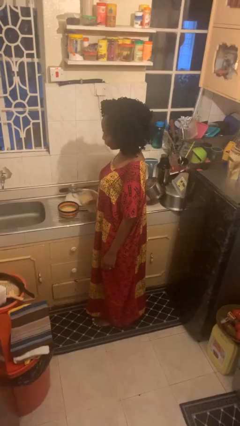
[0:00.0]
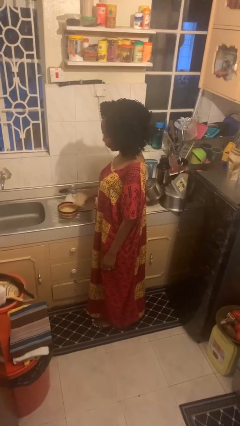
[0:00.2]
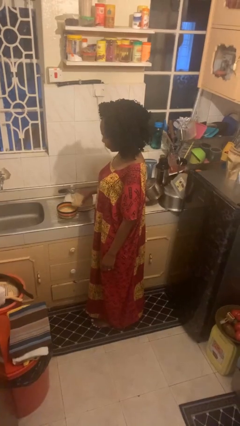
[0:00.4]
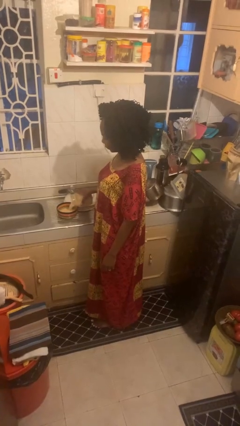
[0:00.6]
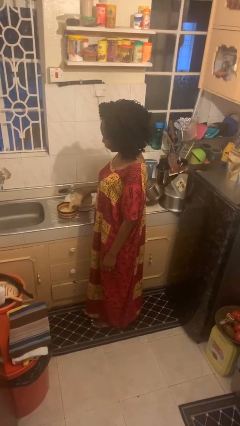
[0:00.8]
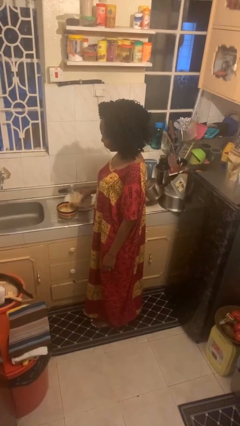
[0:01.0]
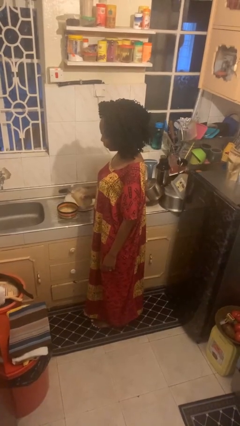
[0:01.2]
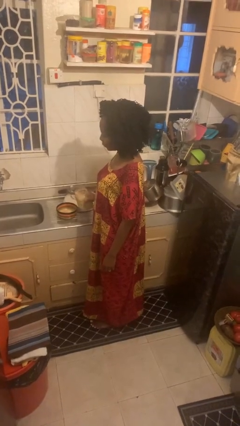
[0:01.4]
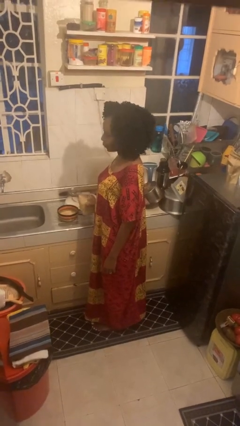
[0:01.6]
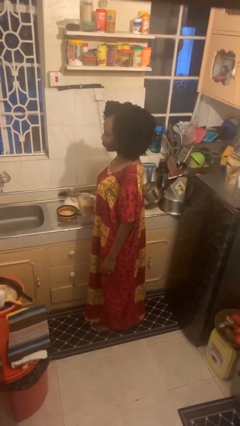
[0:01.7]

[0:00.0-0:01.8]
person pours into bowl

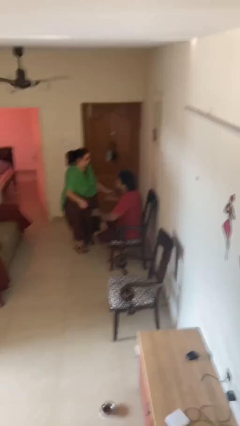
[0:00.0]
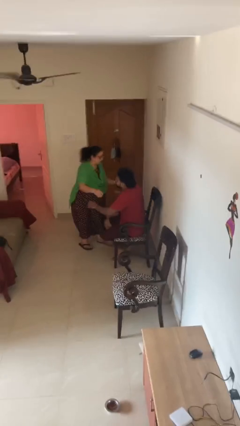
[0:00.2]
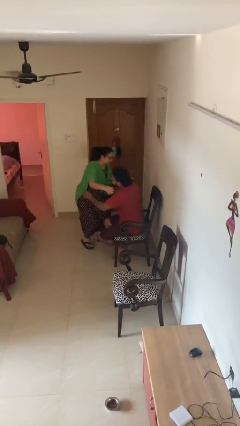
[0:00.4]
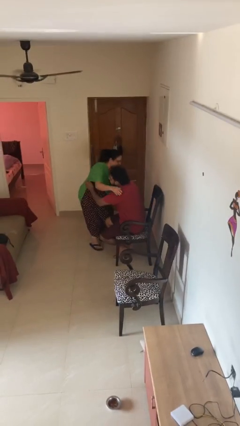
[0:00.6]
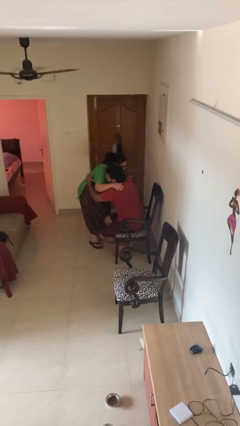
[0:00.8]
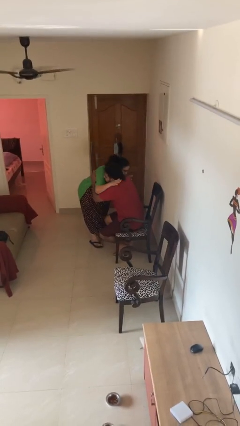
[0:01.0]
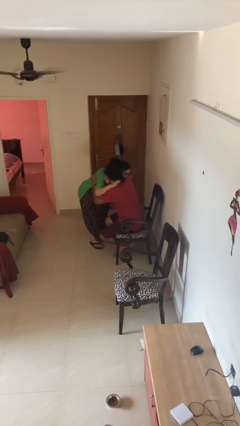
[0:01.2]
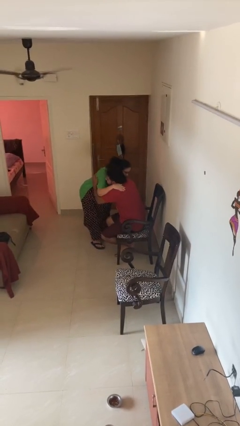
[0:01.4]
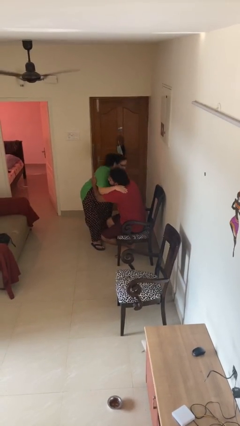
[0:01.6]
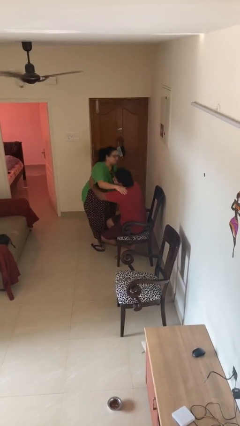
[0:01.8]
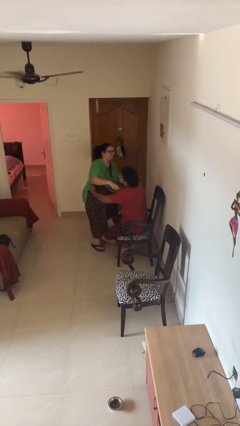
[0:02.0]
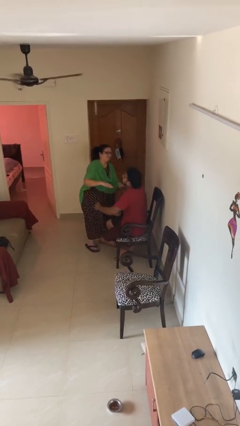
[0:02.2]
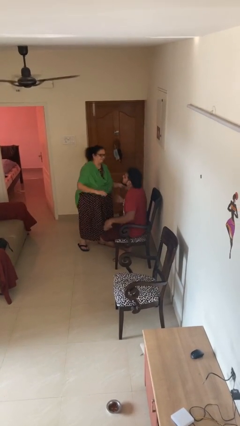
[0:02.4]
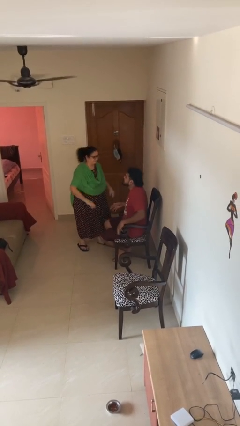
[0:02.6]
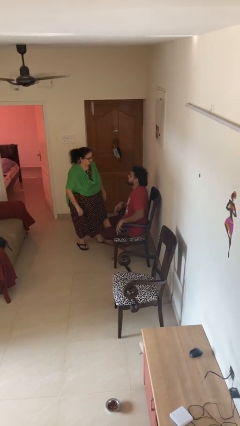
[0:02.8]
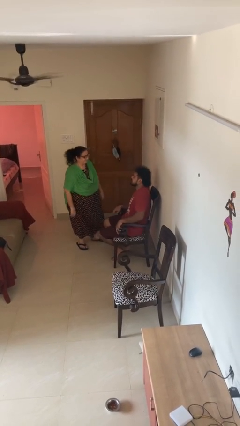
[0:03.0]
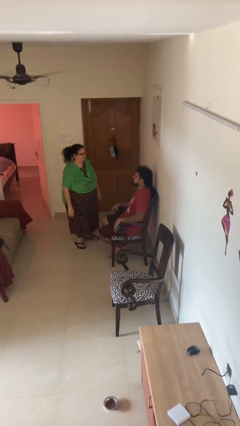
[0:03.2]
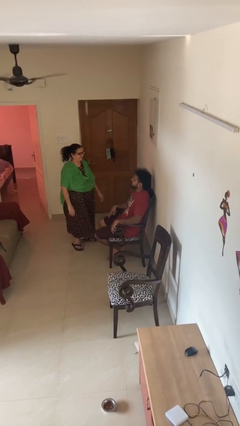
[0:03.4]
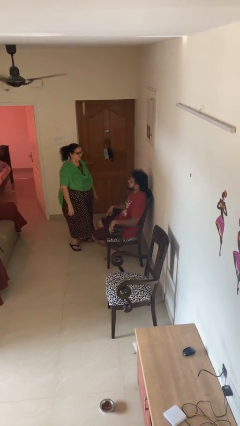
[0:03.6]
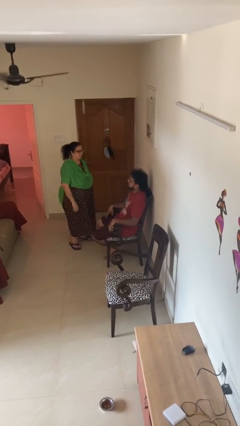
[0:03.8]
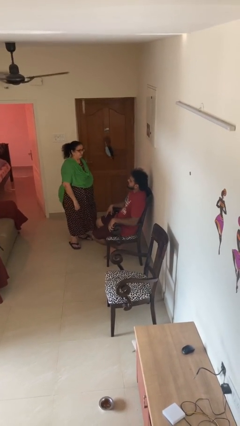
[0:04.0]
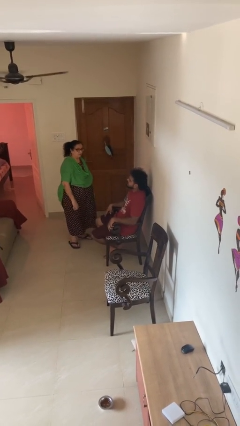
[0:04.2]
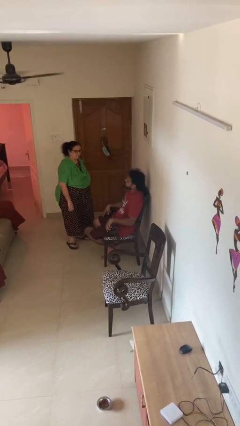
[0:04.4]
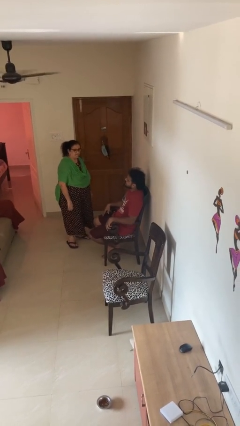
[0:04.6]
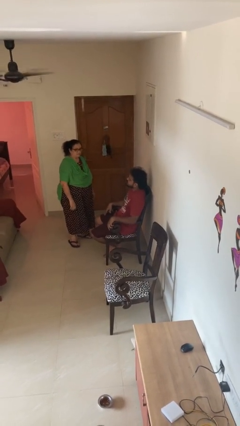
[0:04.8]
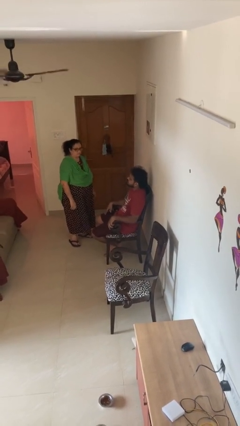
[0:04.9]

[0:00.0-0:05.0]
person embraces person

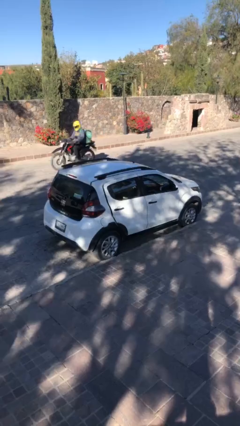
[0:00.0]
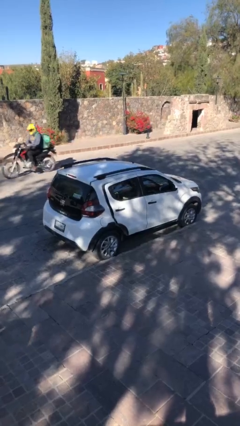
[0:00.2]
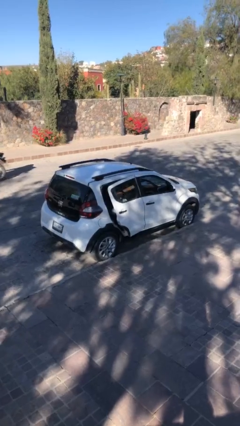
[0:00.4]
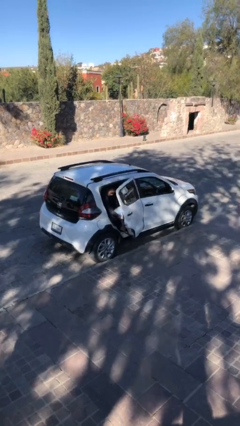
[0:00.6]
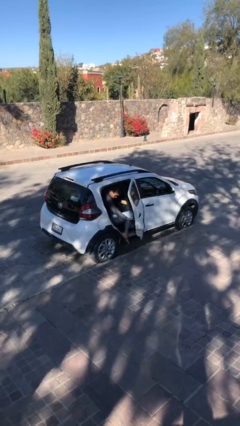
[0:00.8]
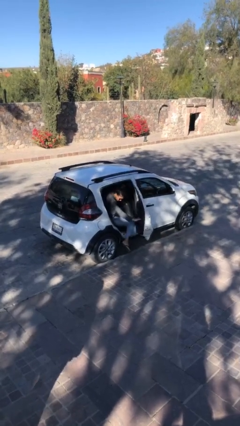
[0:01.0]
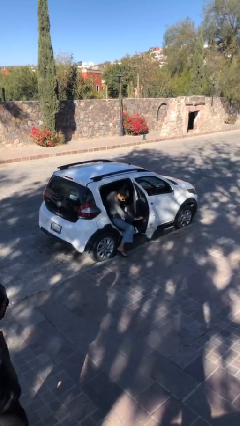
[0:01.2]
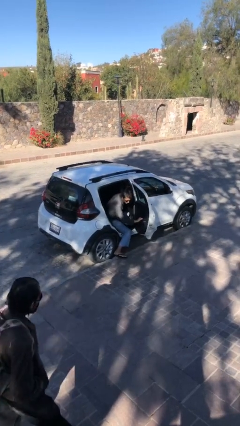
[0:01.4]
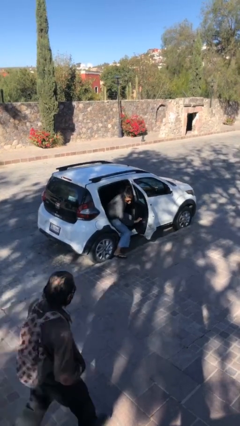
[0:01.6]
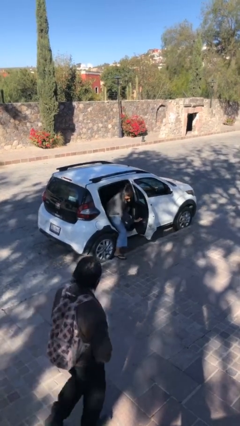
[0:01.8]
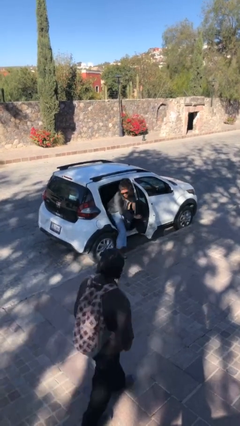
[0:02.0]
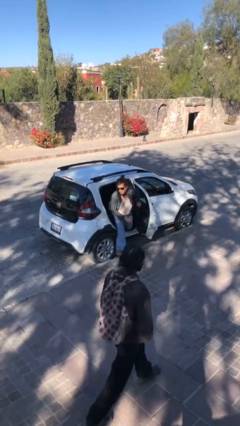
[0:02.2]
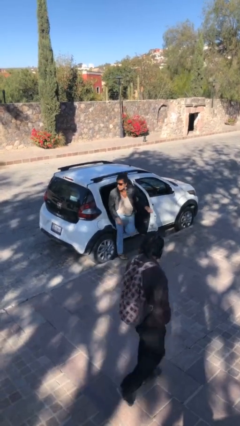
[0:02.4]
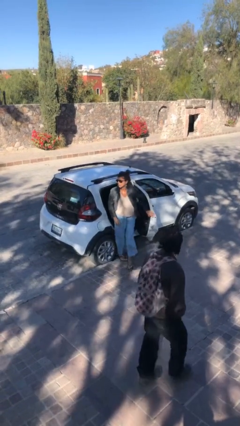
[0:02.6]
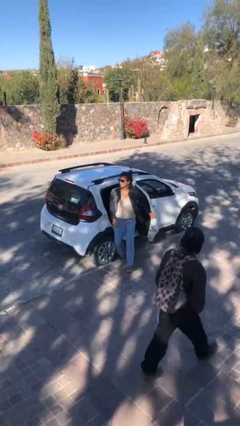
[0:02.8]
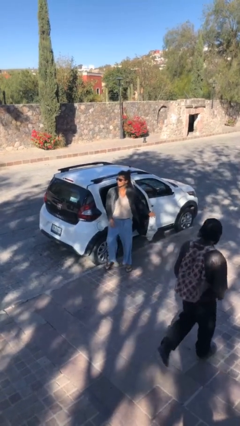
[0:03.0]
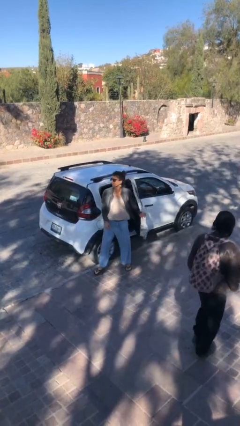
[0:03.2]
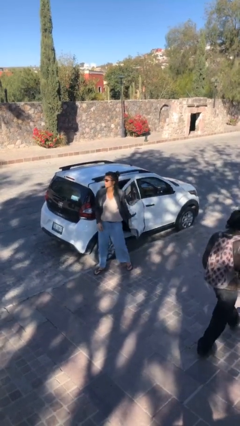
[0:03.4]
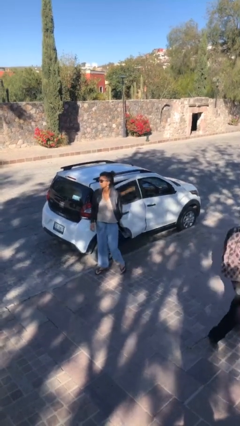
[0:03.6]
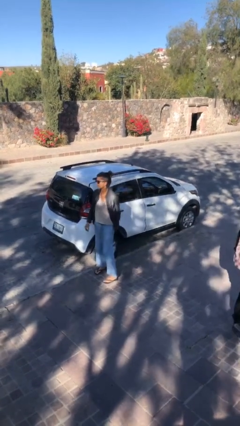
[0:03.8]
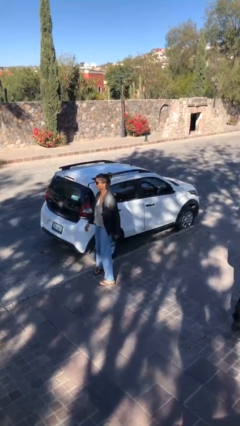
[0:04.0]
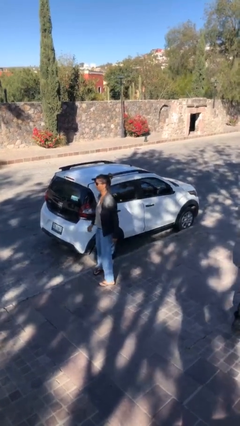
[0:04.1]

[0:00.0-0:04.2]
car drops off person

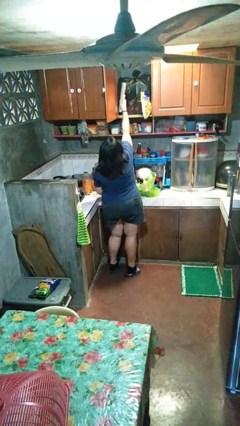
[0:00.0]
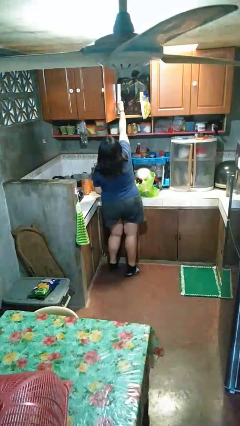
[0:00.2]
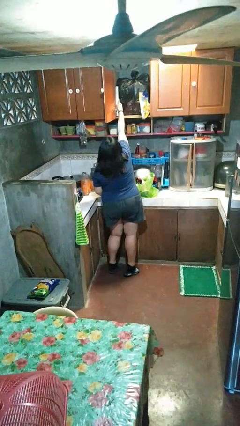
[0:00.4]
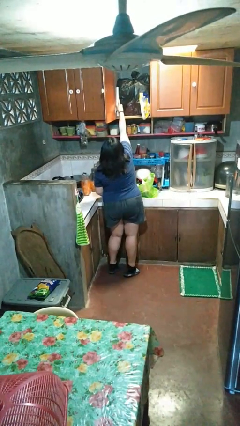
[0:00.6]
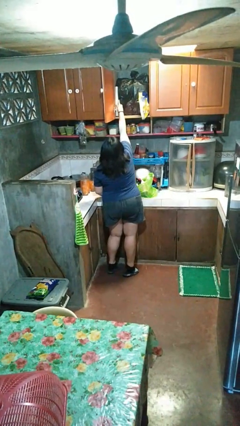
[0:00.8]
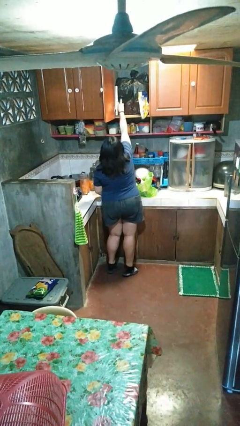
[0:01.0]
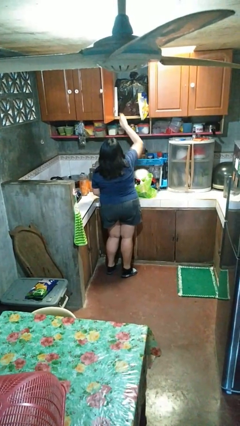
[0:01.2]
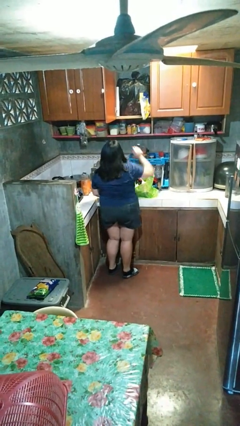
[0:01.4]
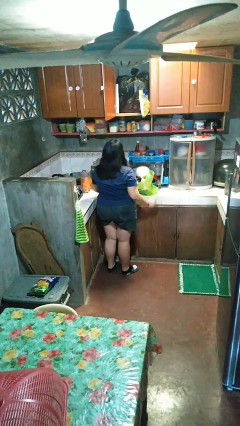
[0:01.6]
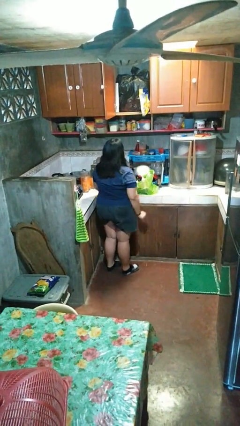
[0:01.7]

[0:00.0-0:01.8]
person loads groceries into cabinet

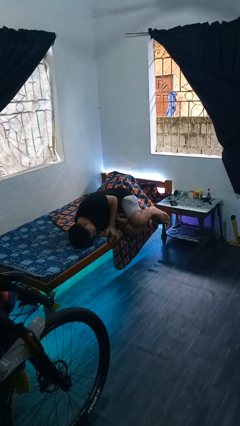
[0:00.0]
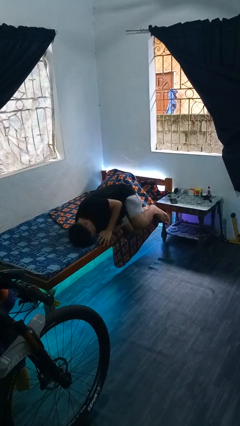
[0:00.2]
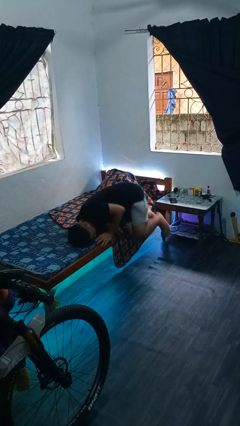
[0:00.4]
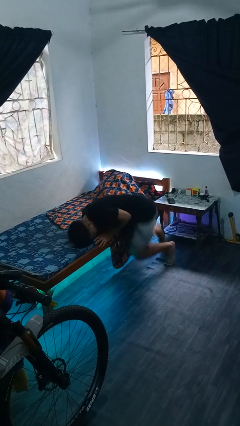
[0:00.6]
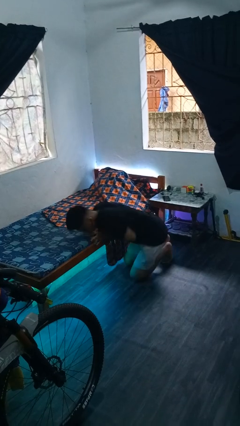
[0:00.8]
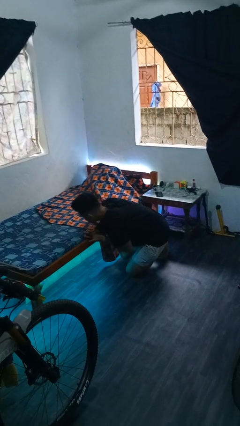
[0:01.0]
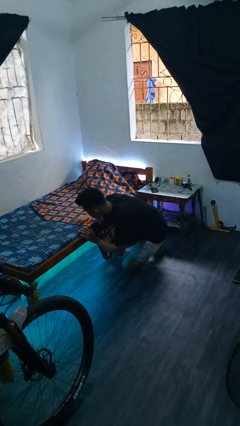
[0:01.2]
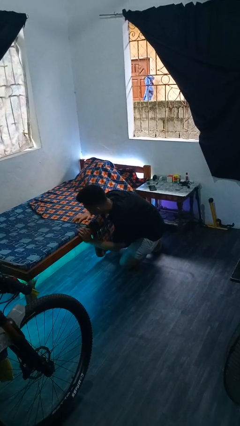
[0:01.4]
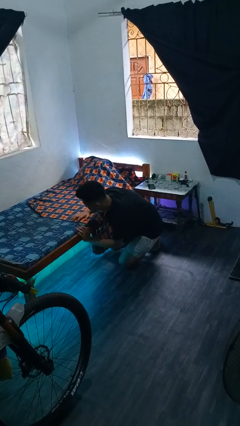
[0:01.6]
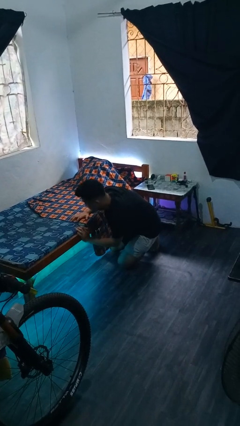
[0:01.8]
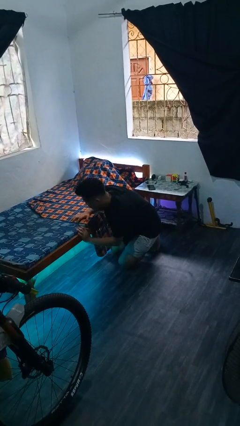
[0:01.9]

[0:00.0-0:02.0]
person falls from bed

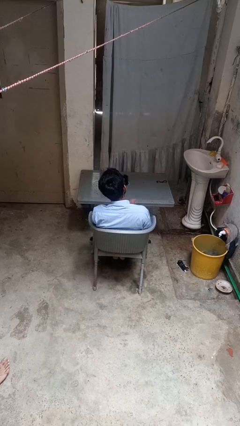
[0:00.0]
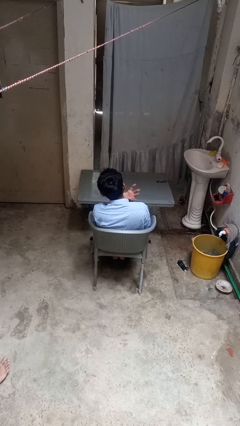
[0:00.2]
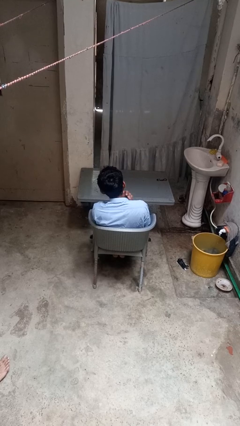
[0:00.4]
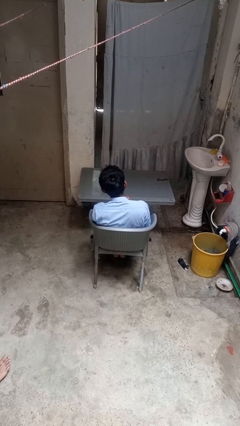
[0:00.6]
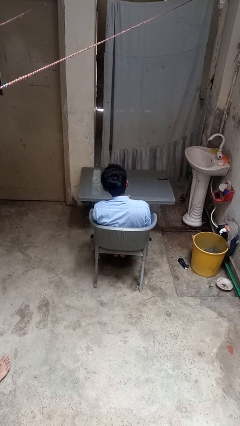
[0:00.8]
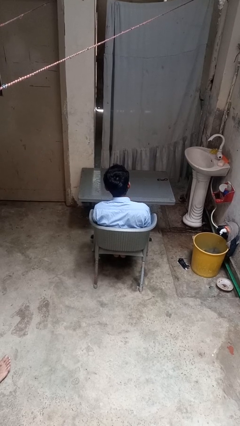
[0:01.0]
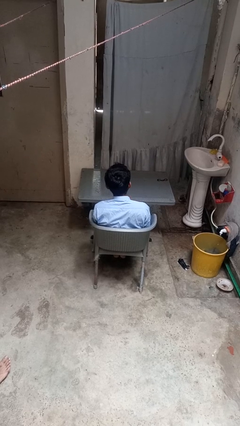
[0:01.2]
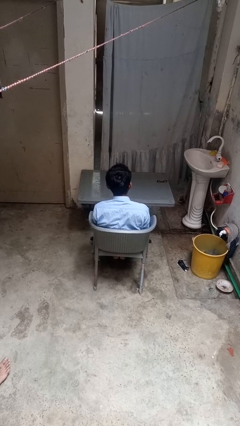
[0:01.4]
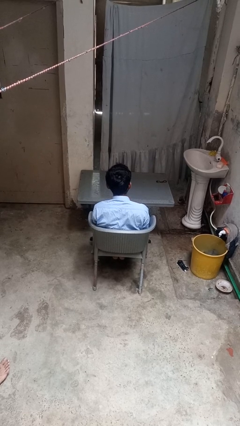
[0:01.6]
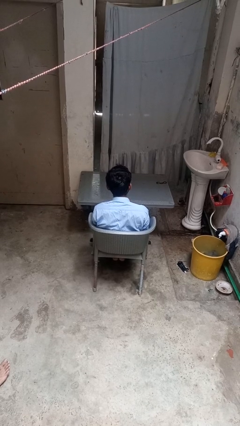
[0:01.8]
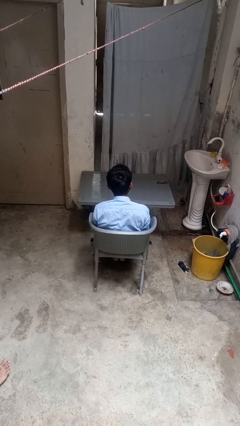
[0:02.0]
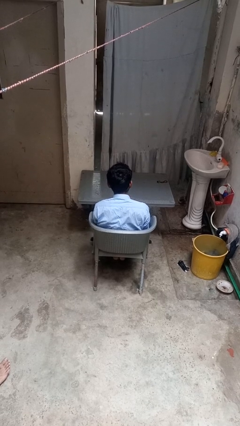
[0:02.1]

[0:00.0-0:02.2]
person takes off hairtie

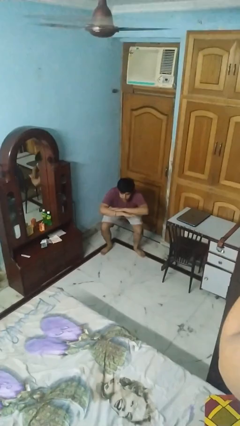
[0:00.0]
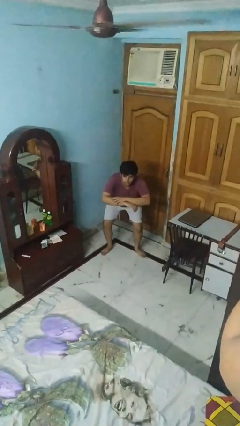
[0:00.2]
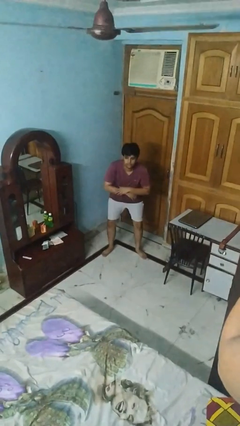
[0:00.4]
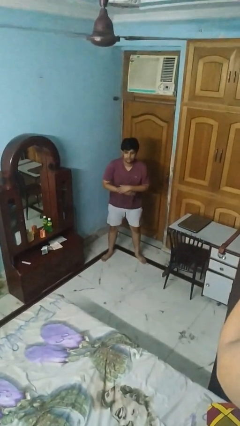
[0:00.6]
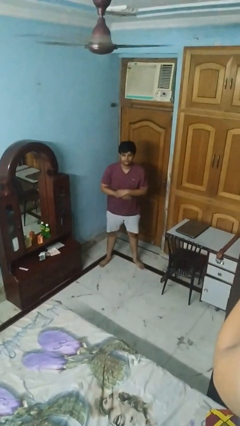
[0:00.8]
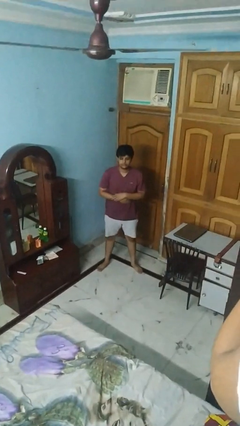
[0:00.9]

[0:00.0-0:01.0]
person stands up
